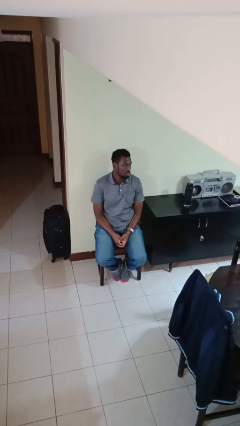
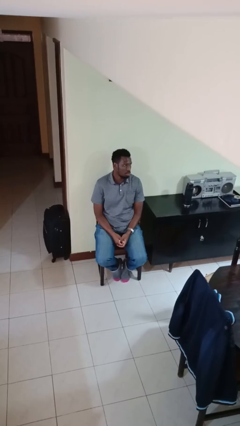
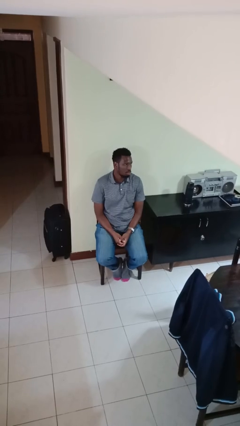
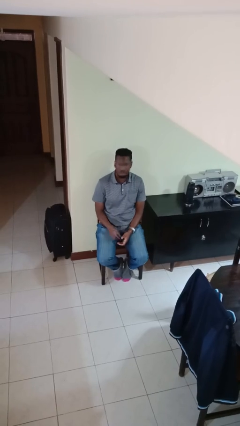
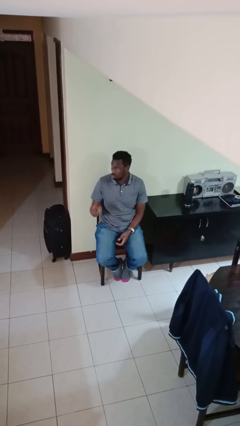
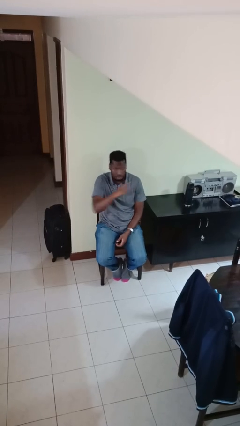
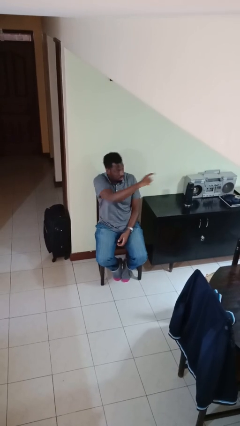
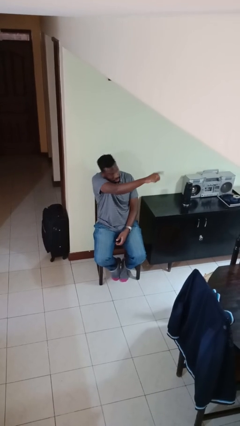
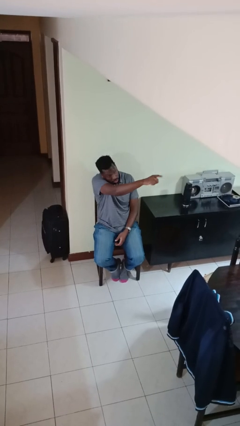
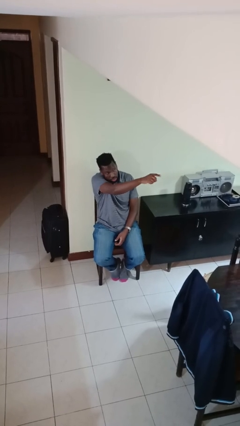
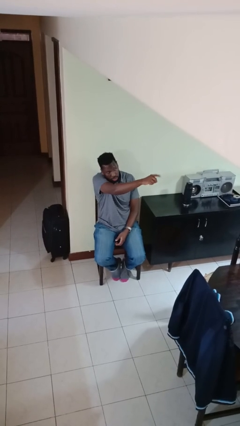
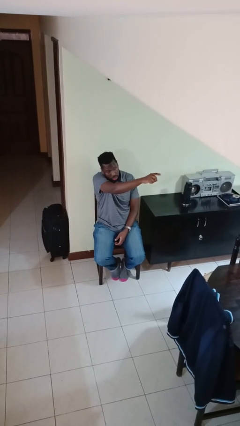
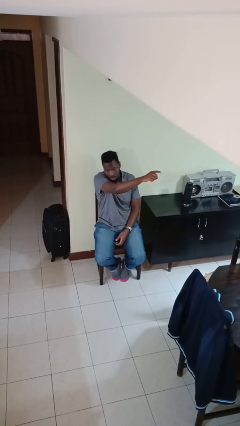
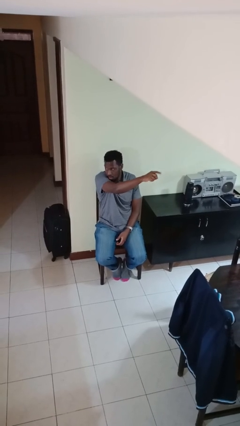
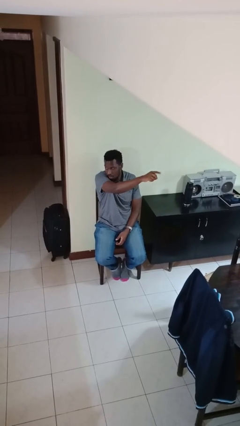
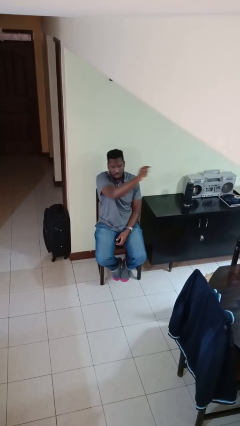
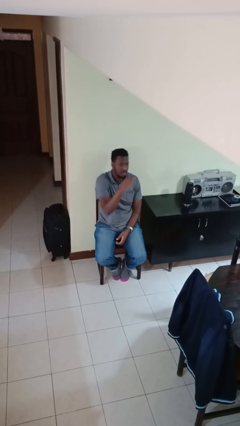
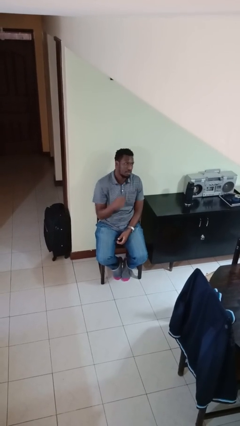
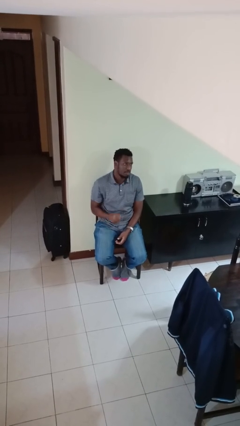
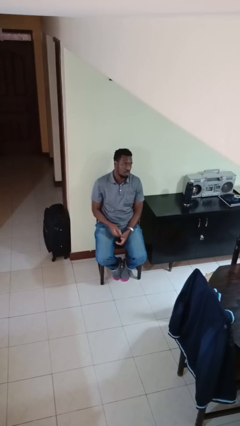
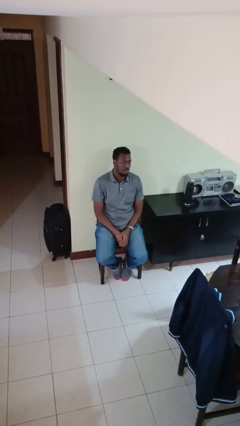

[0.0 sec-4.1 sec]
person points at person

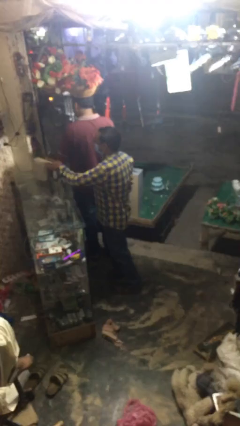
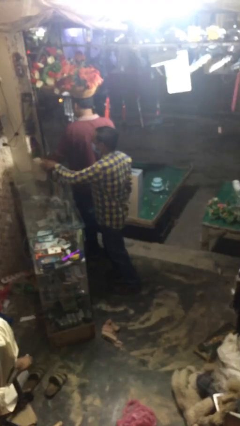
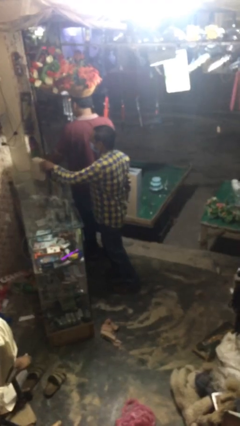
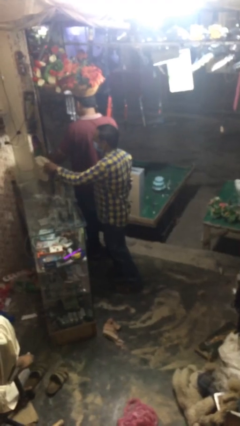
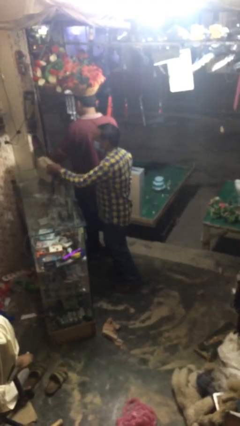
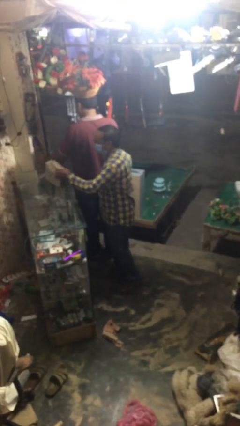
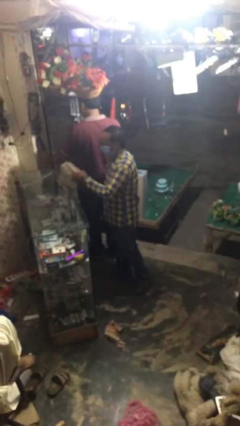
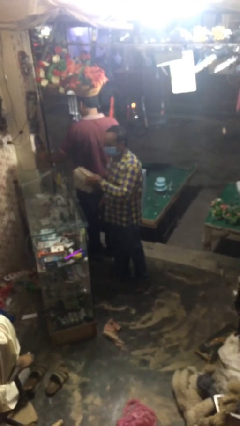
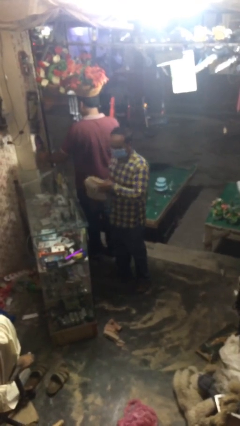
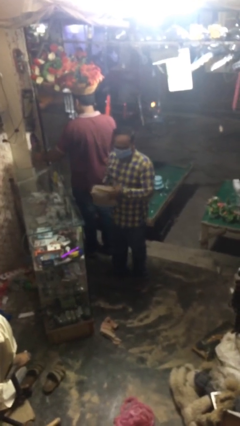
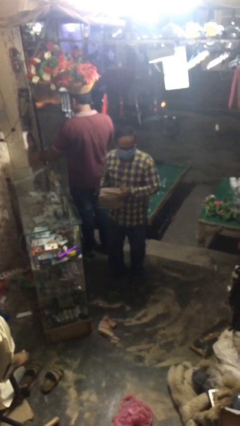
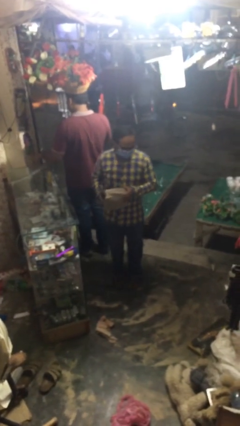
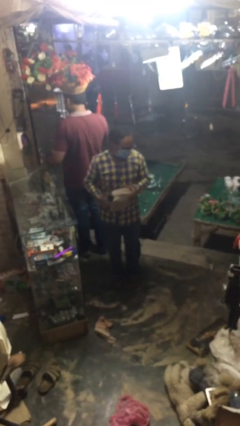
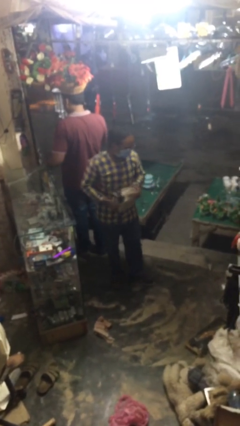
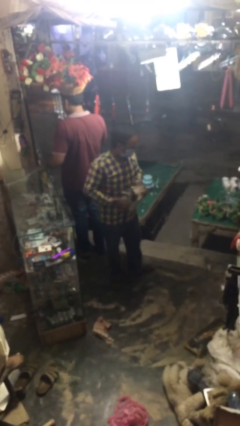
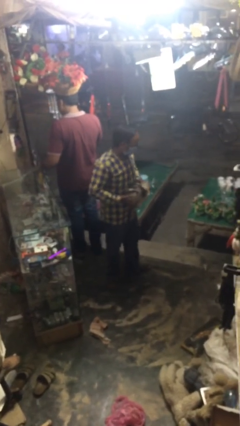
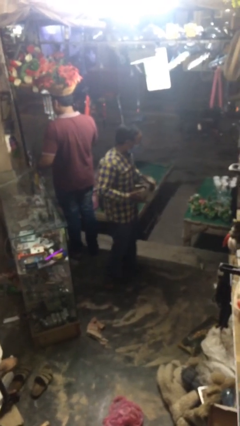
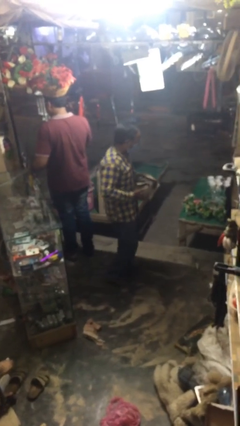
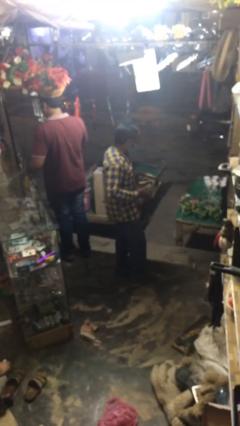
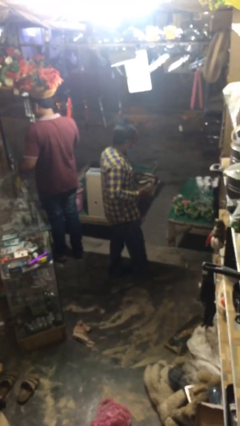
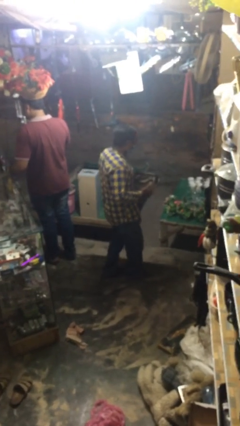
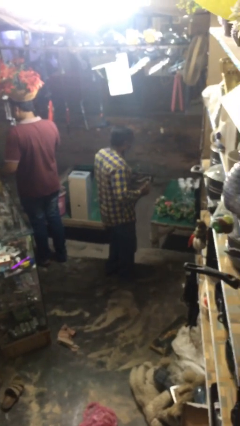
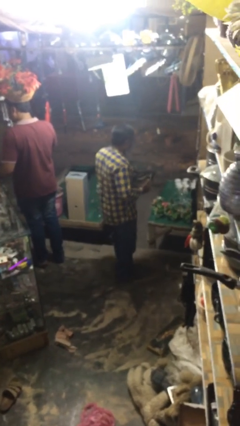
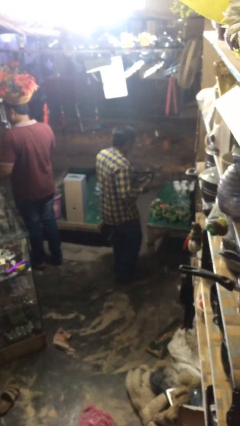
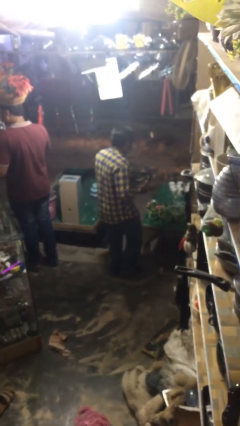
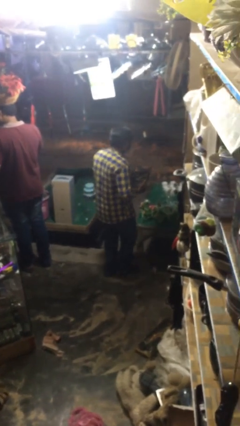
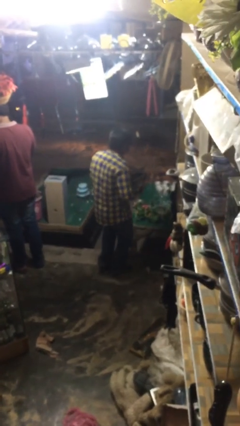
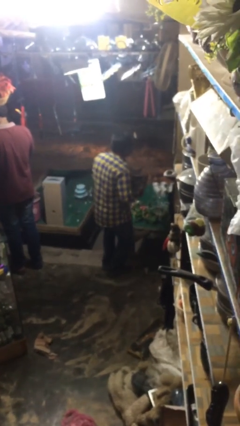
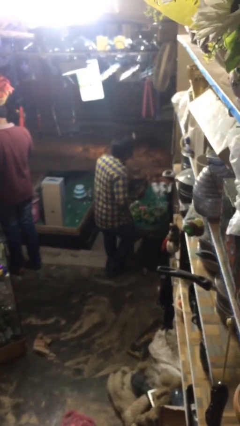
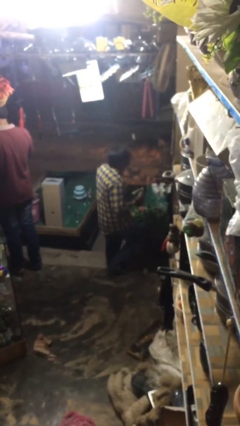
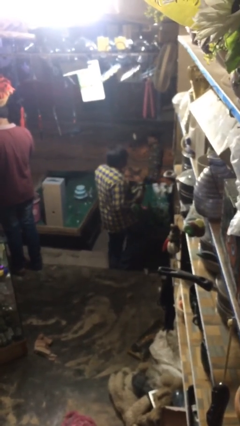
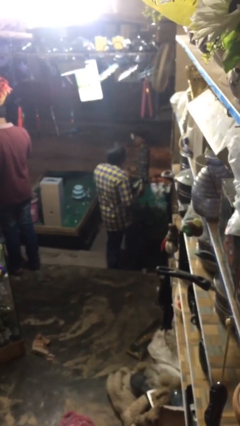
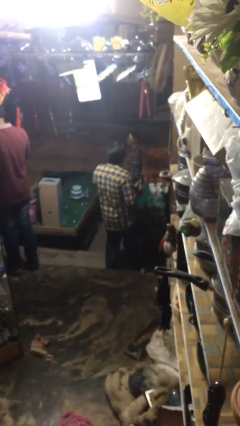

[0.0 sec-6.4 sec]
person steals object from person

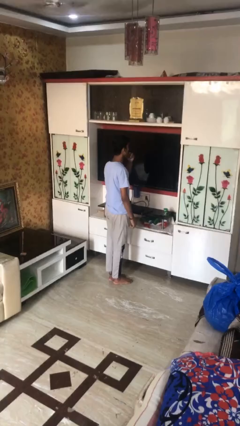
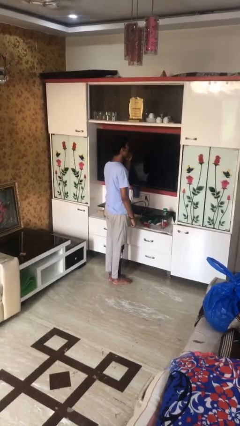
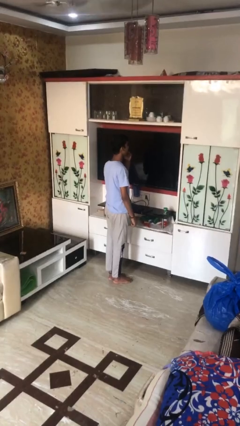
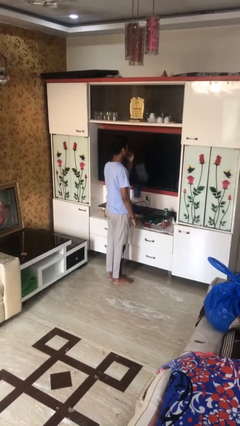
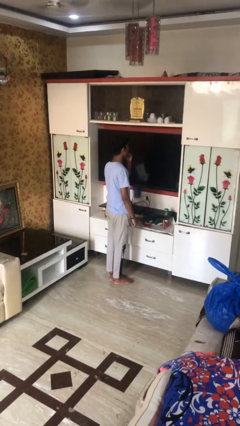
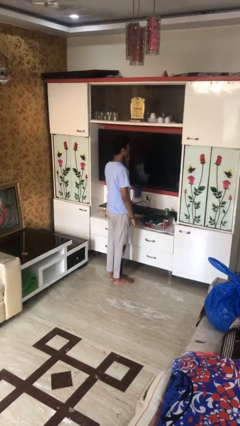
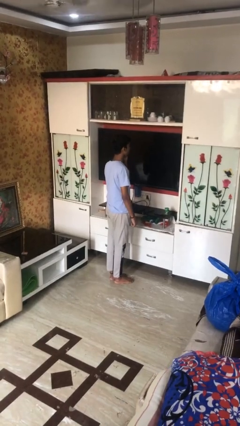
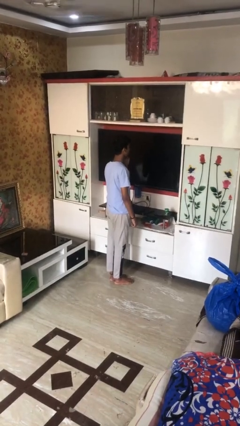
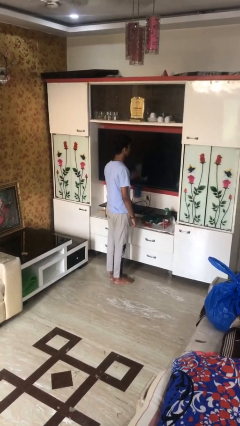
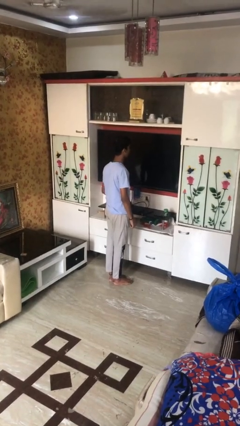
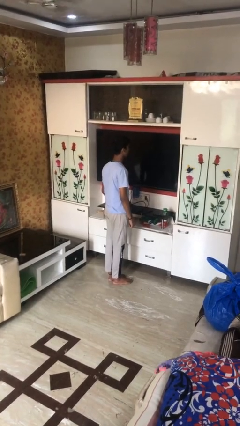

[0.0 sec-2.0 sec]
person licks fingers

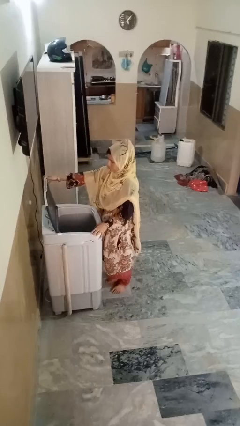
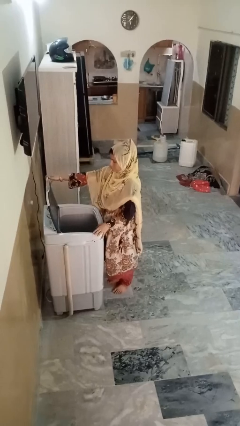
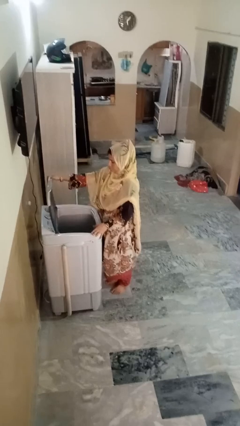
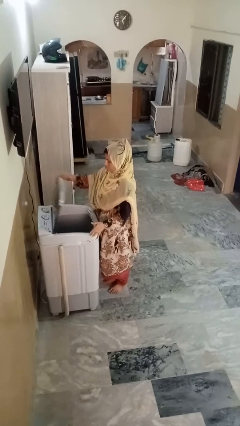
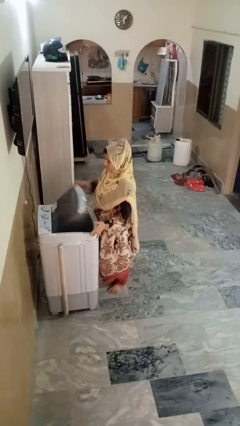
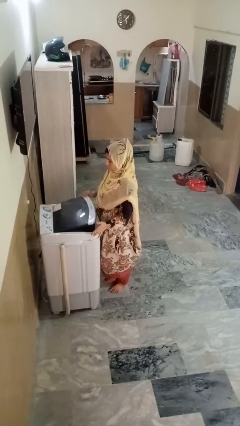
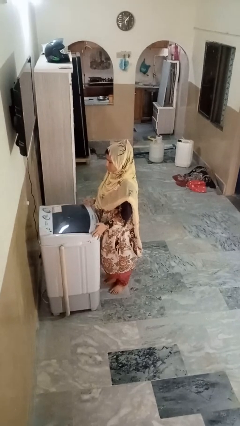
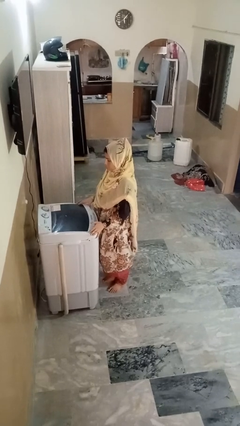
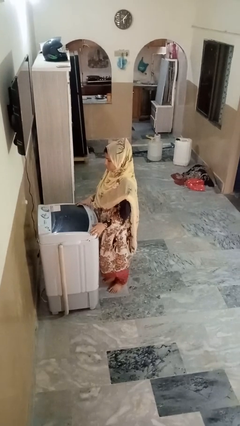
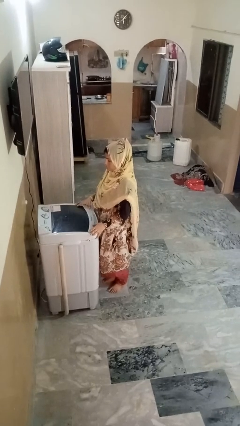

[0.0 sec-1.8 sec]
person closes clothes washer

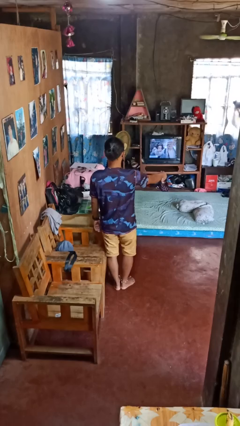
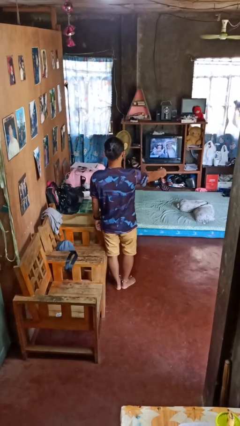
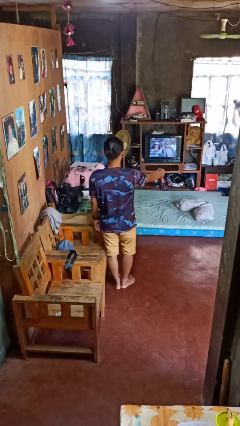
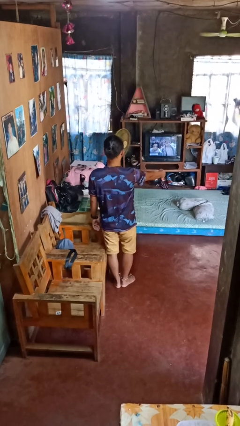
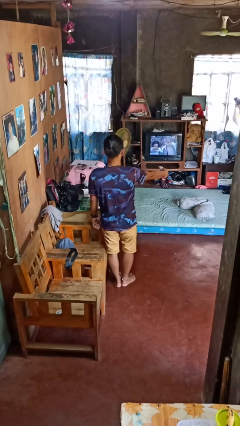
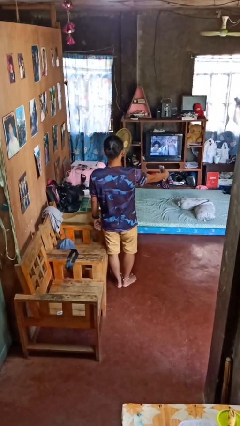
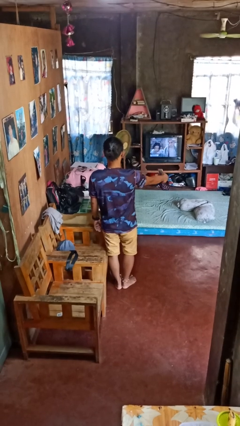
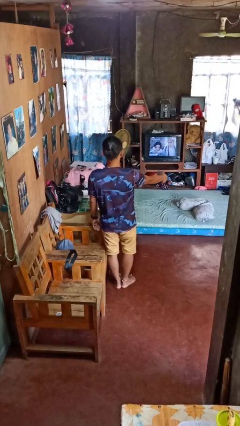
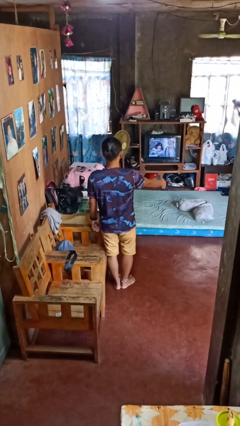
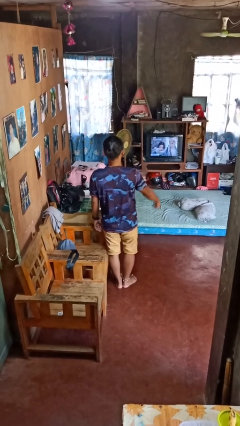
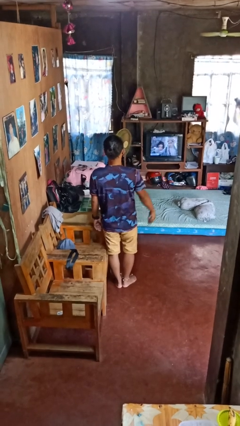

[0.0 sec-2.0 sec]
person uses television remote

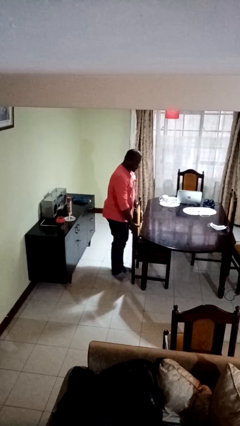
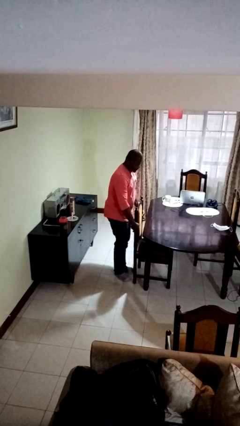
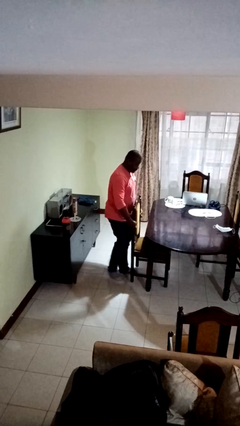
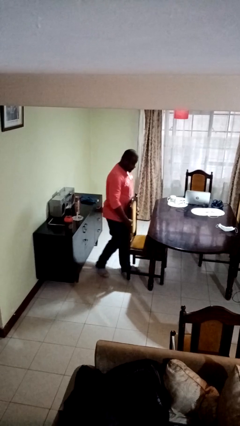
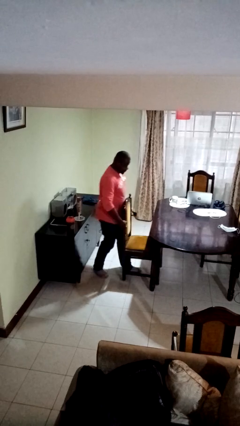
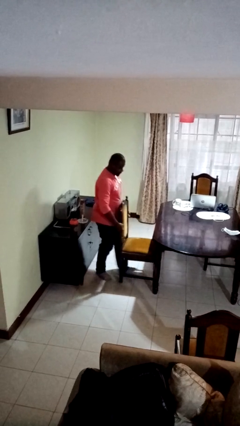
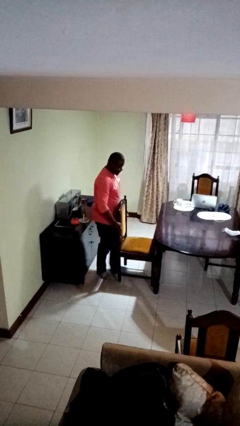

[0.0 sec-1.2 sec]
person pushes in chair
